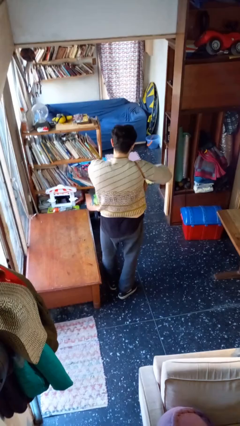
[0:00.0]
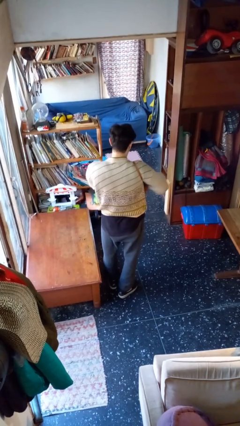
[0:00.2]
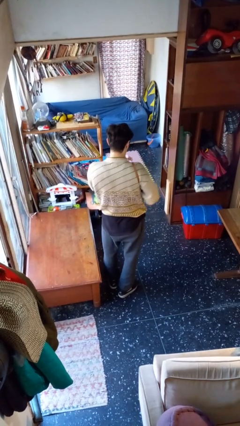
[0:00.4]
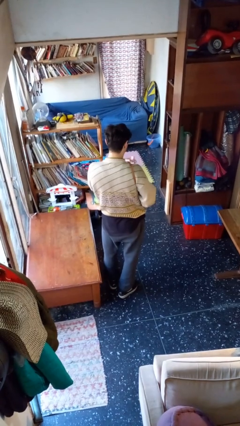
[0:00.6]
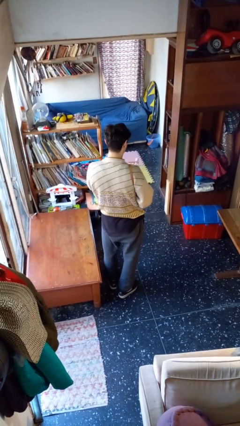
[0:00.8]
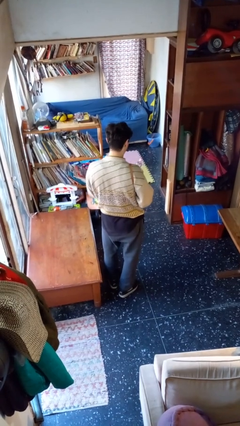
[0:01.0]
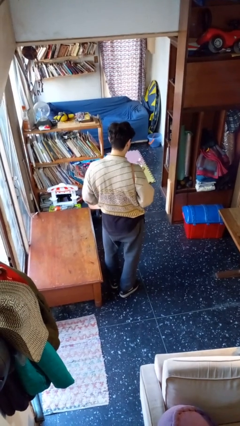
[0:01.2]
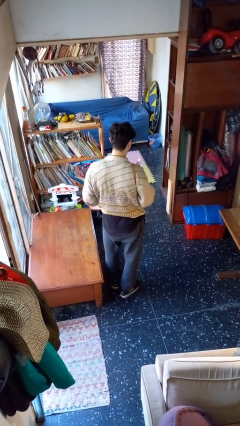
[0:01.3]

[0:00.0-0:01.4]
person takes object from purse

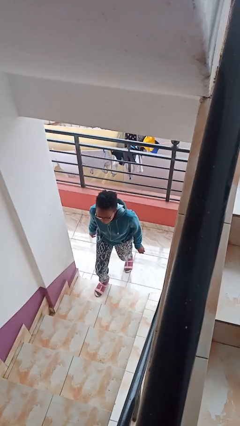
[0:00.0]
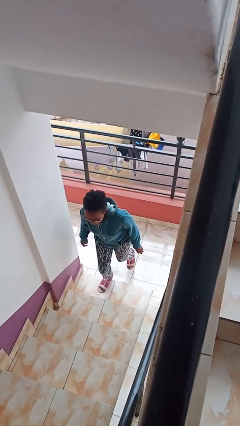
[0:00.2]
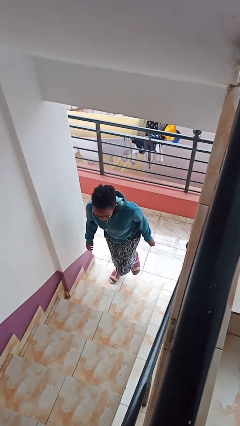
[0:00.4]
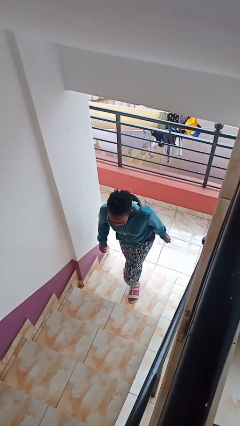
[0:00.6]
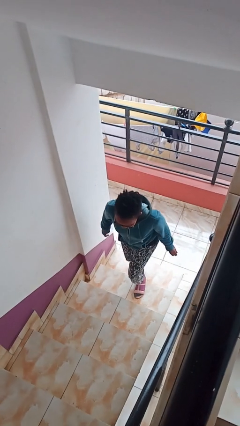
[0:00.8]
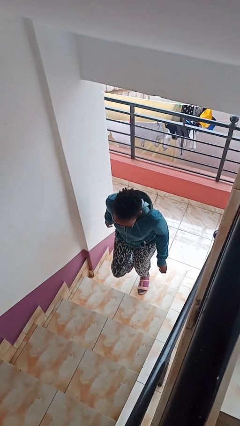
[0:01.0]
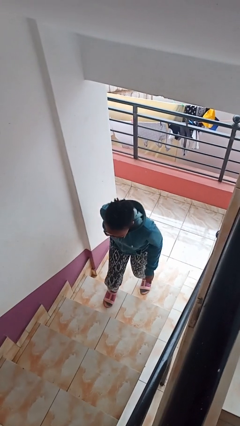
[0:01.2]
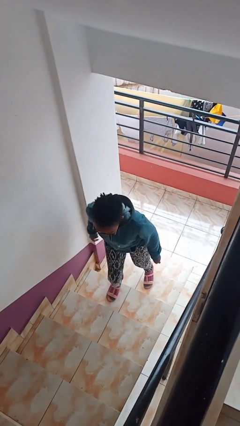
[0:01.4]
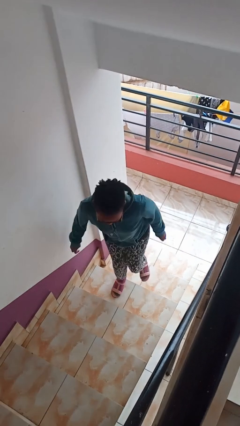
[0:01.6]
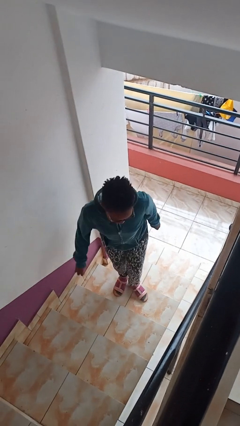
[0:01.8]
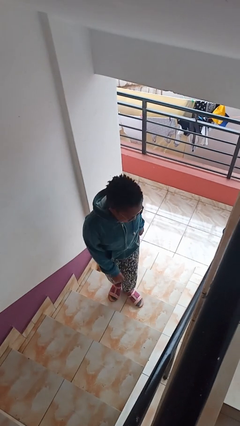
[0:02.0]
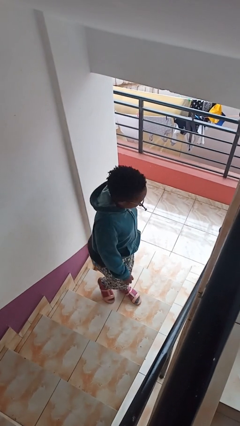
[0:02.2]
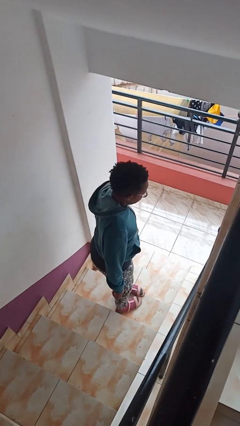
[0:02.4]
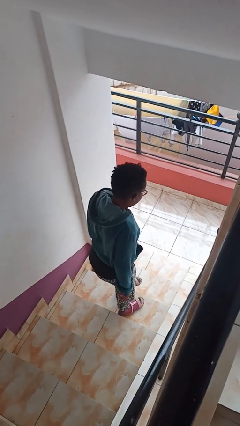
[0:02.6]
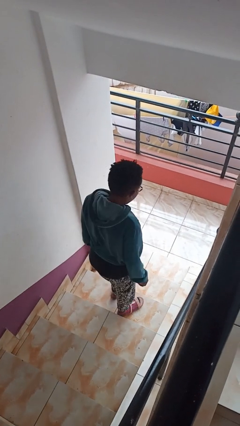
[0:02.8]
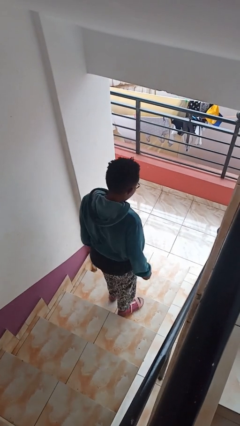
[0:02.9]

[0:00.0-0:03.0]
person climbs up stairs

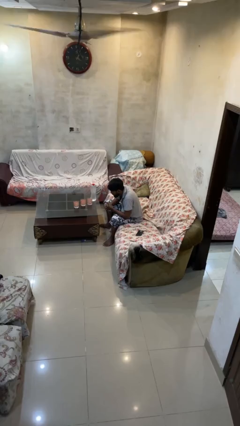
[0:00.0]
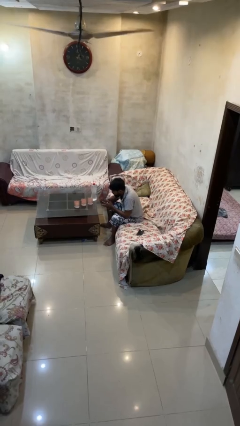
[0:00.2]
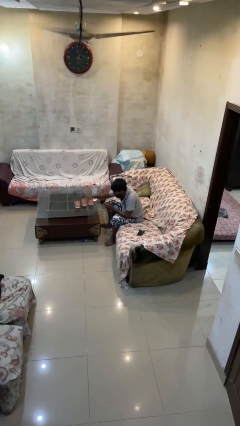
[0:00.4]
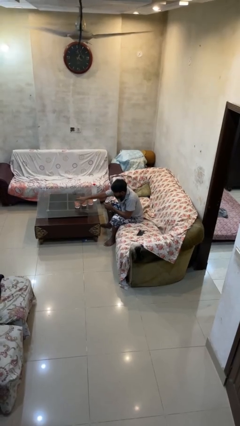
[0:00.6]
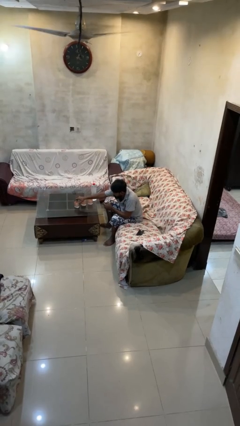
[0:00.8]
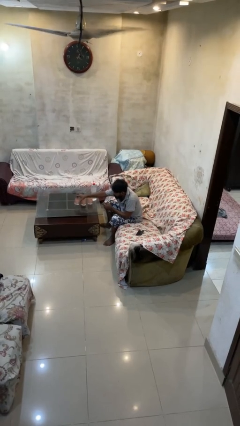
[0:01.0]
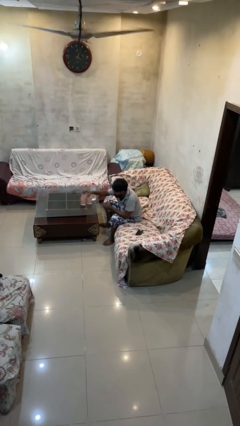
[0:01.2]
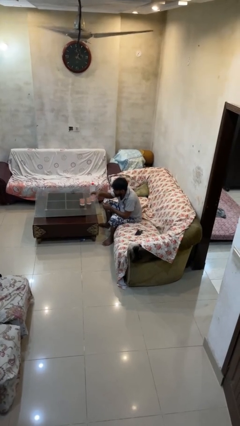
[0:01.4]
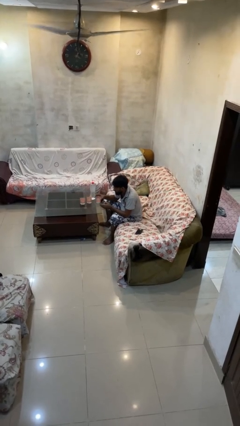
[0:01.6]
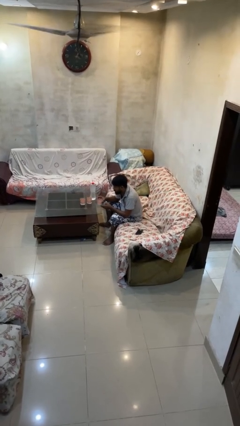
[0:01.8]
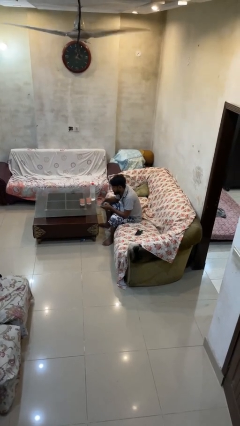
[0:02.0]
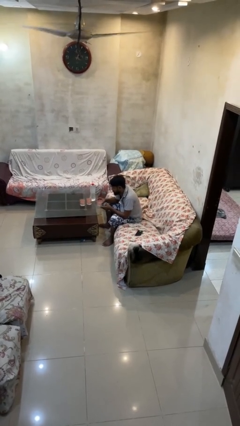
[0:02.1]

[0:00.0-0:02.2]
person picks up object from table

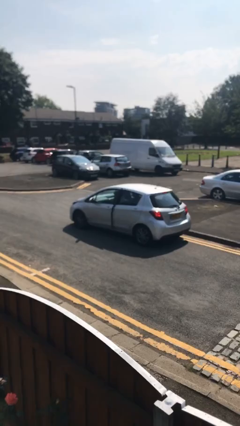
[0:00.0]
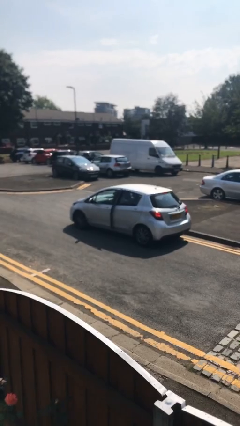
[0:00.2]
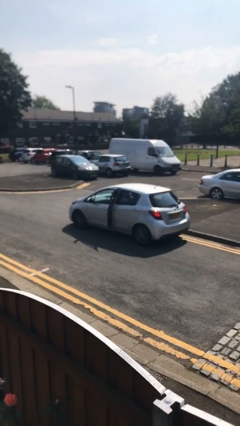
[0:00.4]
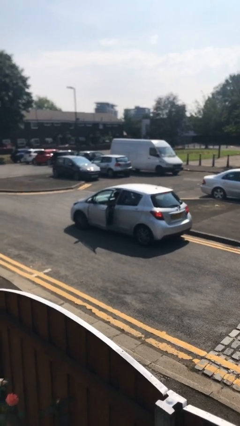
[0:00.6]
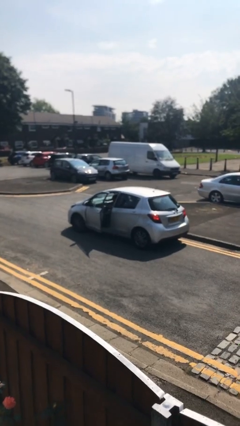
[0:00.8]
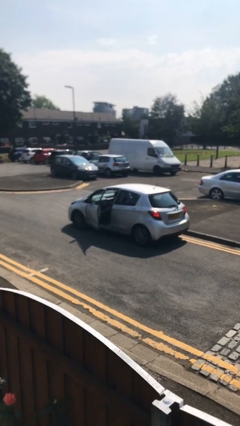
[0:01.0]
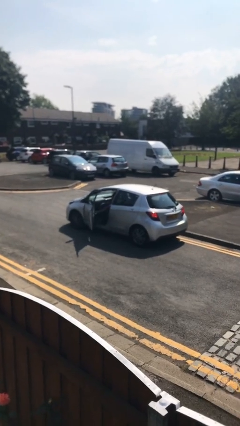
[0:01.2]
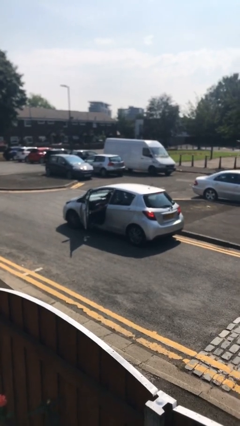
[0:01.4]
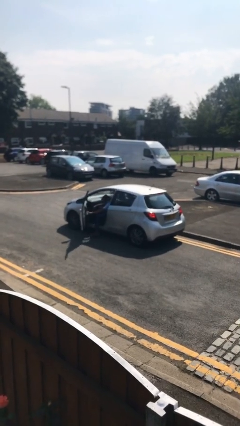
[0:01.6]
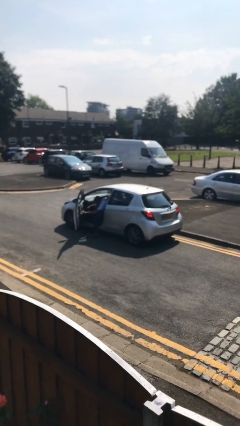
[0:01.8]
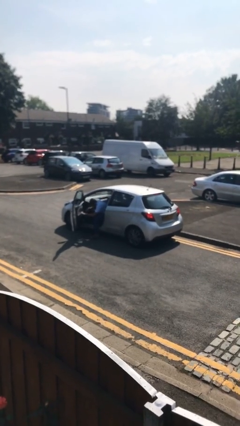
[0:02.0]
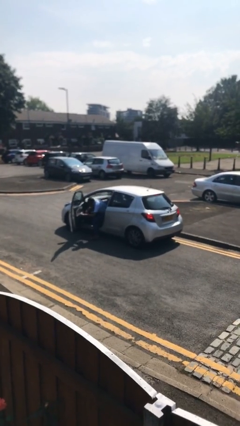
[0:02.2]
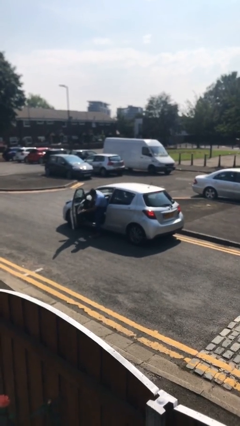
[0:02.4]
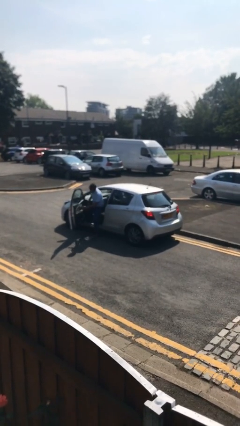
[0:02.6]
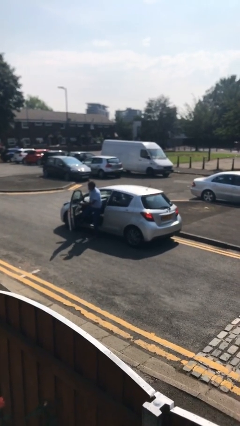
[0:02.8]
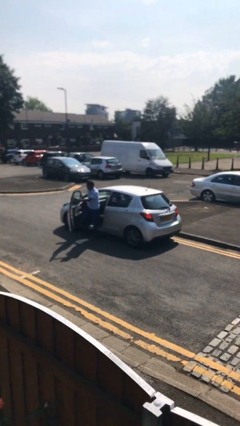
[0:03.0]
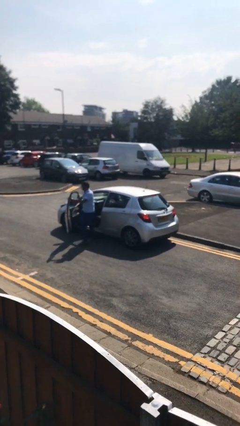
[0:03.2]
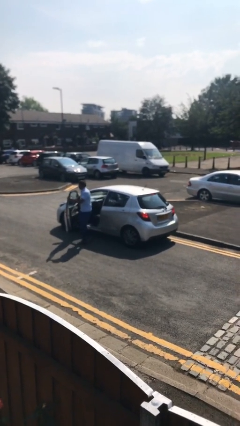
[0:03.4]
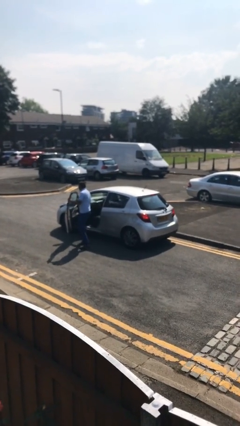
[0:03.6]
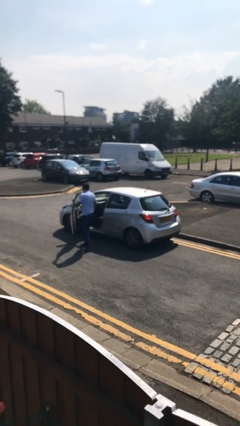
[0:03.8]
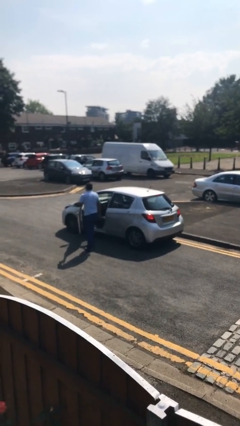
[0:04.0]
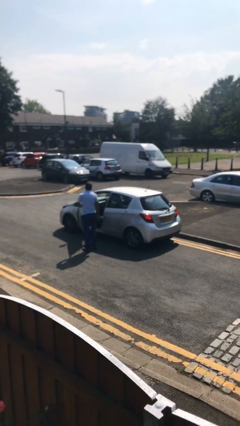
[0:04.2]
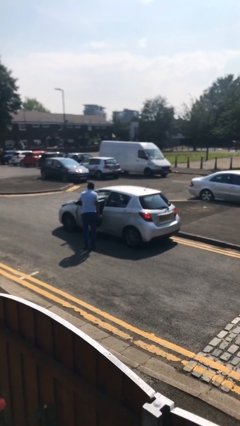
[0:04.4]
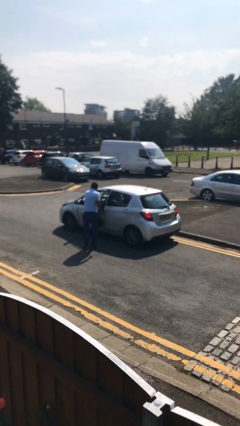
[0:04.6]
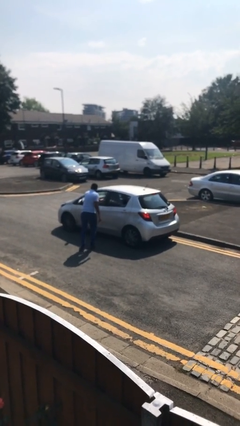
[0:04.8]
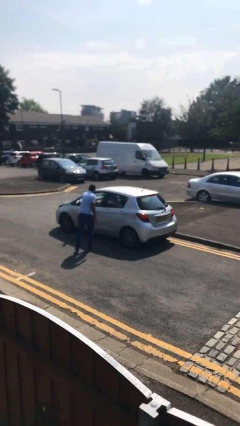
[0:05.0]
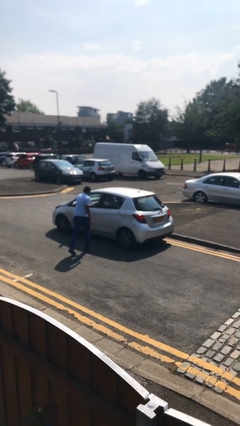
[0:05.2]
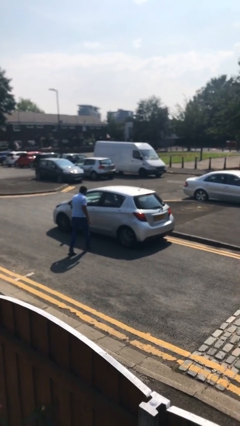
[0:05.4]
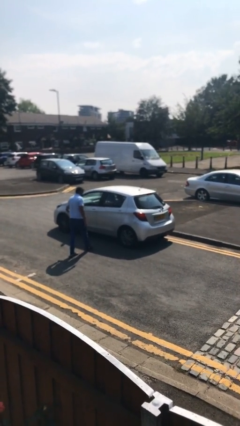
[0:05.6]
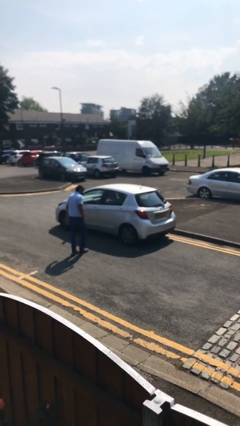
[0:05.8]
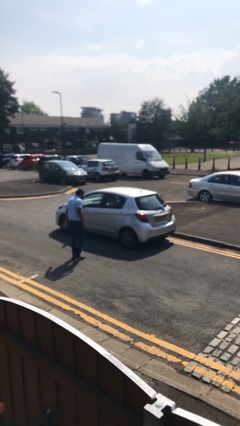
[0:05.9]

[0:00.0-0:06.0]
car drops off person

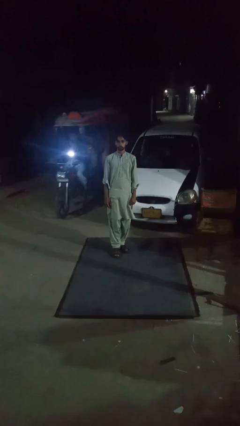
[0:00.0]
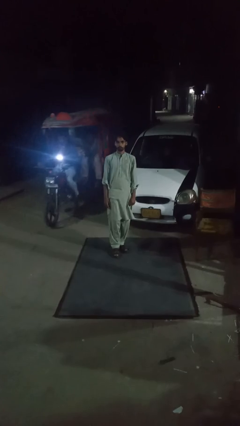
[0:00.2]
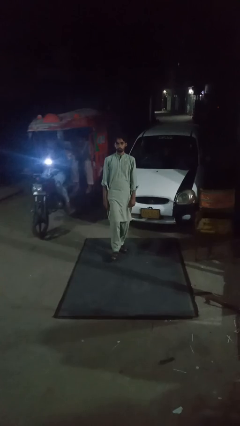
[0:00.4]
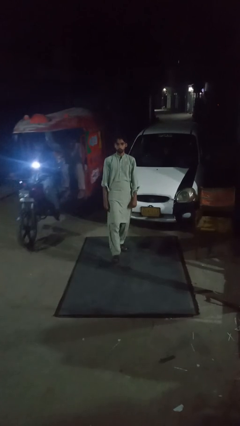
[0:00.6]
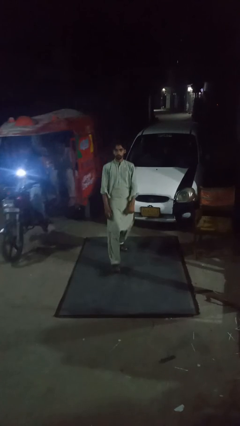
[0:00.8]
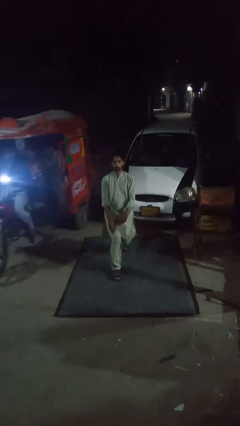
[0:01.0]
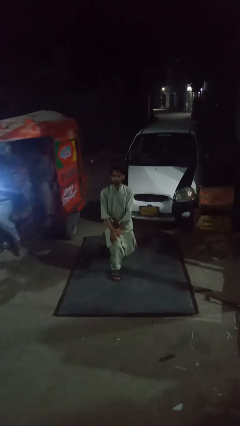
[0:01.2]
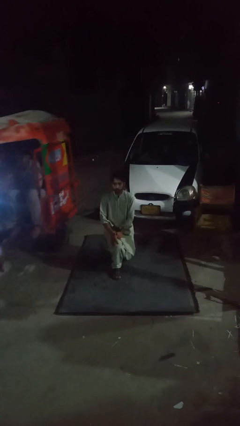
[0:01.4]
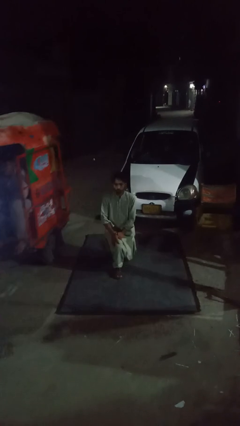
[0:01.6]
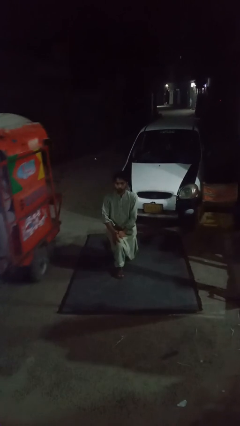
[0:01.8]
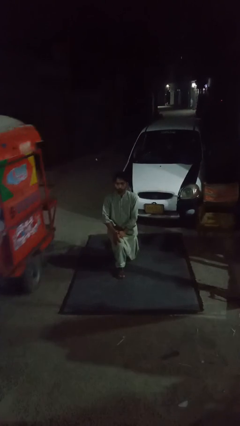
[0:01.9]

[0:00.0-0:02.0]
person exercises with lunges

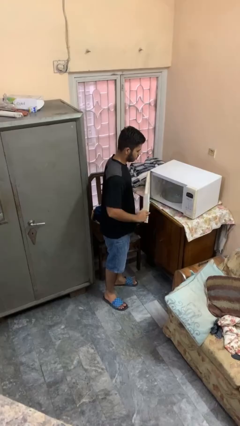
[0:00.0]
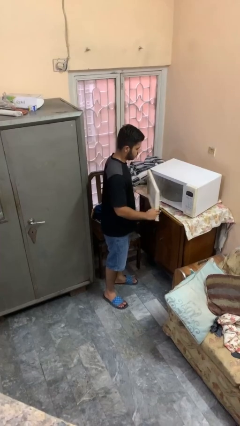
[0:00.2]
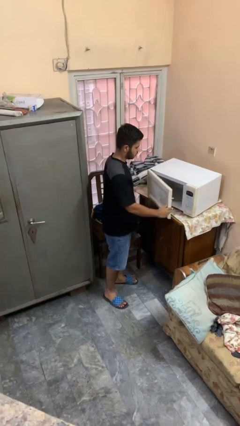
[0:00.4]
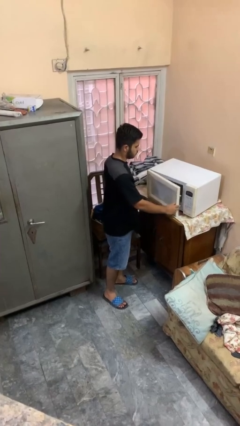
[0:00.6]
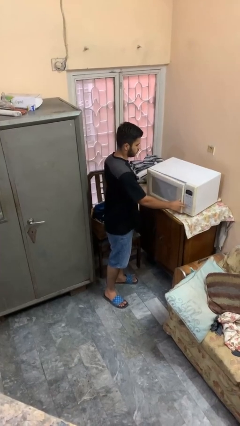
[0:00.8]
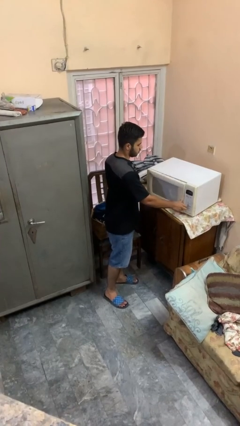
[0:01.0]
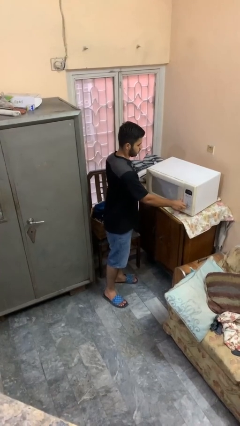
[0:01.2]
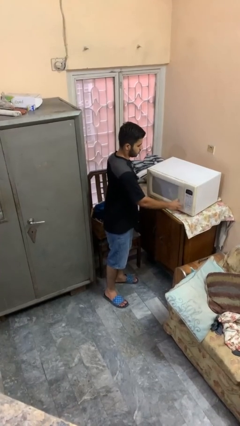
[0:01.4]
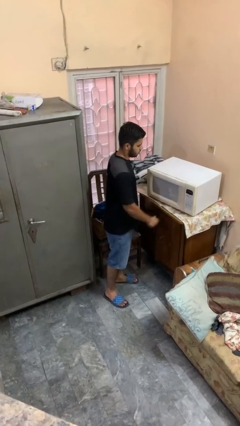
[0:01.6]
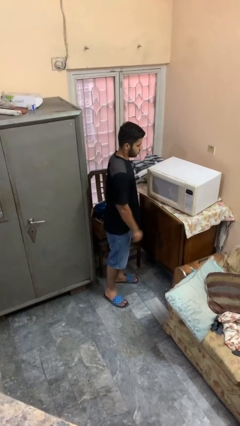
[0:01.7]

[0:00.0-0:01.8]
person closes microwave

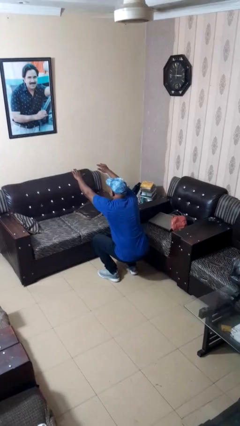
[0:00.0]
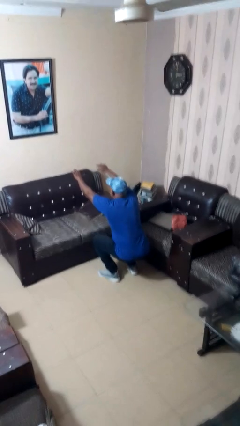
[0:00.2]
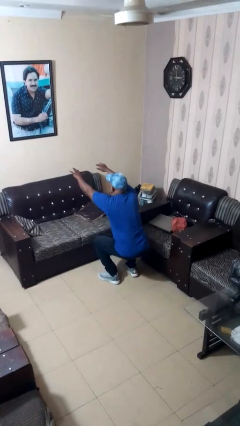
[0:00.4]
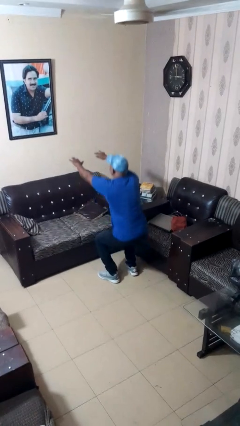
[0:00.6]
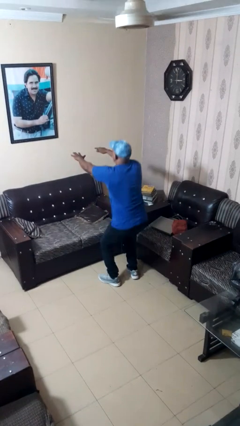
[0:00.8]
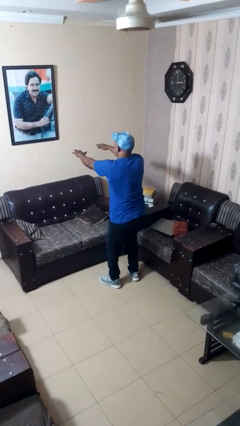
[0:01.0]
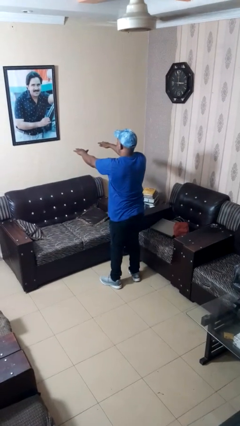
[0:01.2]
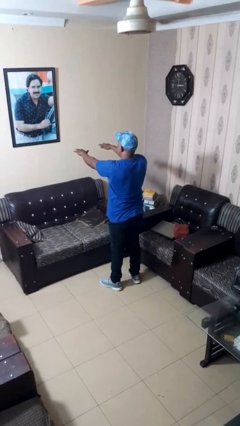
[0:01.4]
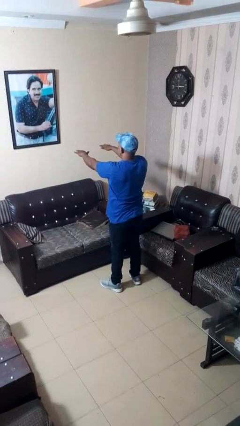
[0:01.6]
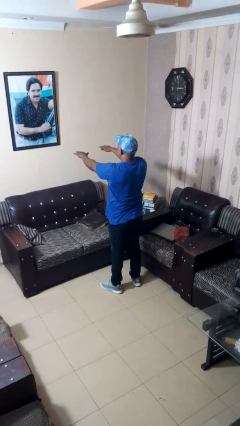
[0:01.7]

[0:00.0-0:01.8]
person stands up
